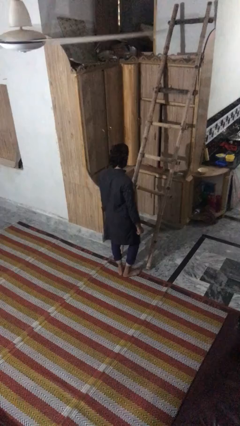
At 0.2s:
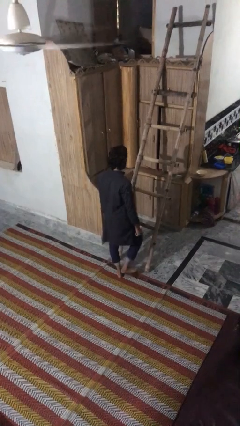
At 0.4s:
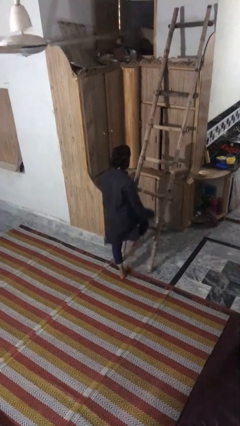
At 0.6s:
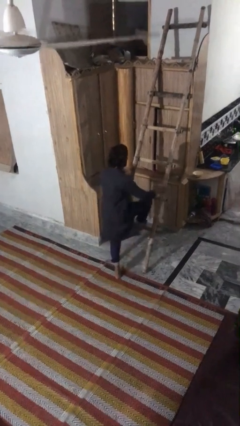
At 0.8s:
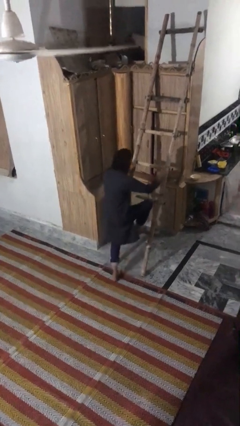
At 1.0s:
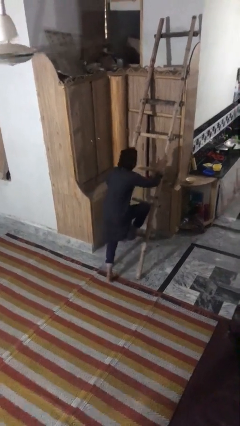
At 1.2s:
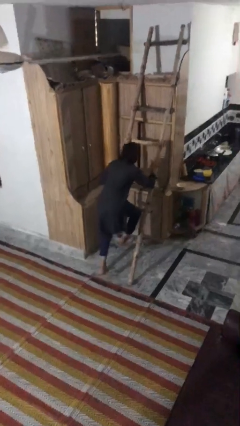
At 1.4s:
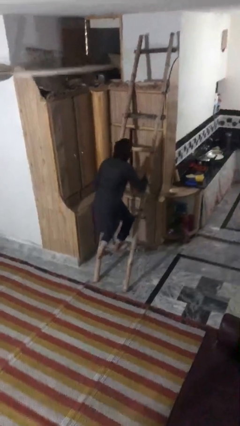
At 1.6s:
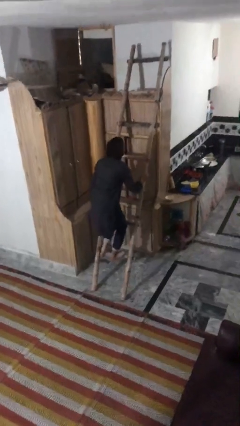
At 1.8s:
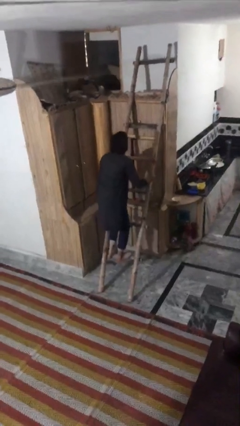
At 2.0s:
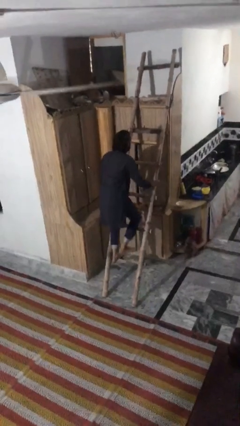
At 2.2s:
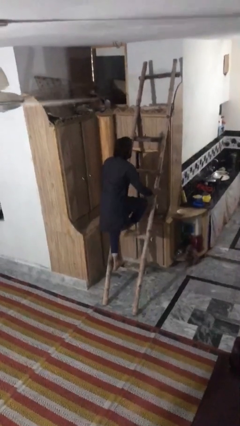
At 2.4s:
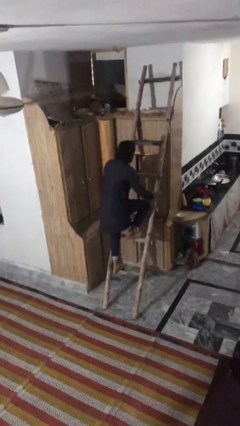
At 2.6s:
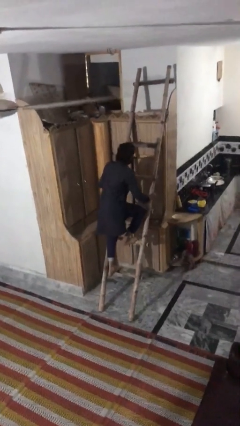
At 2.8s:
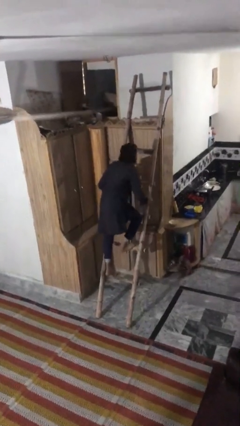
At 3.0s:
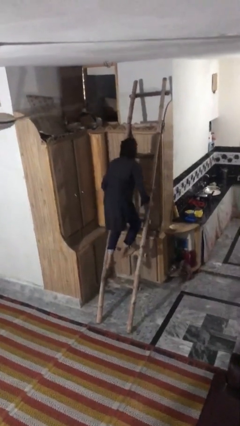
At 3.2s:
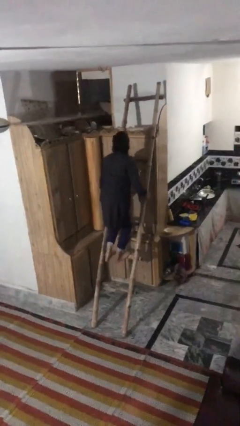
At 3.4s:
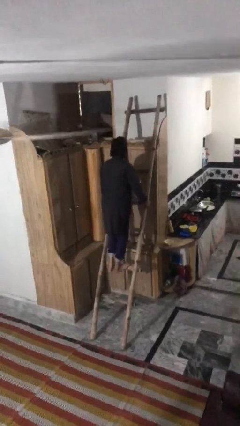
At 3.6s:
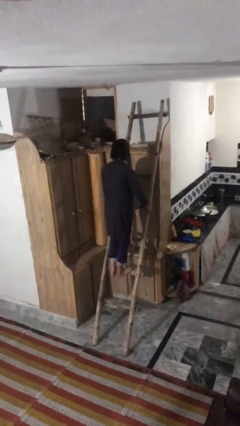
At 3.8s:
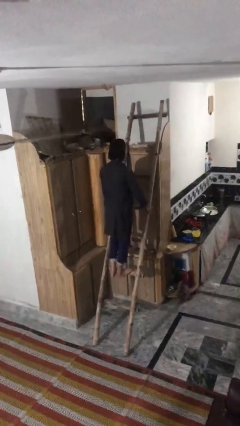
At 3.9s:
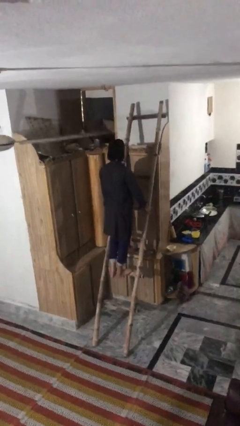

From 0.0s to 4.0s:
person climbs up ladder

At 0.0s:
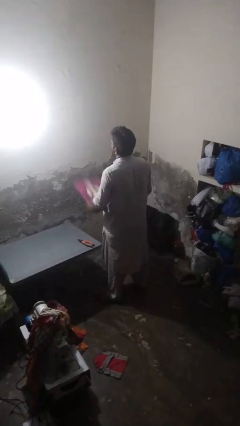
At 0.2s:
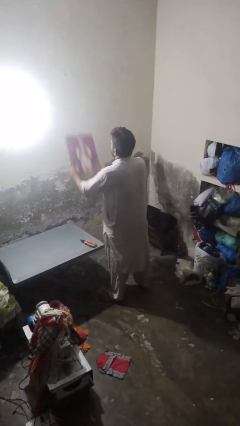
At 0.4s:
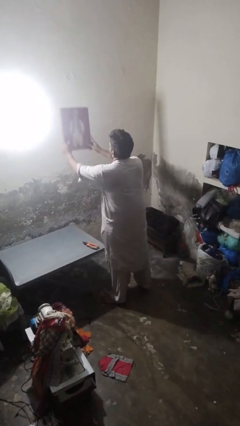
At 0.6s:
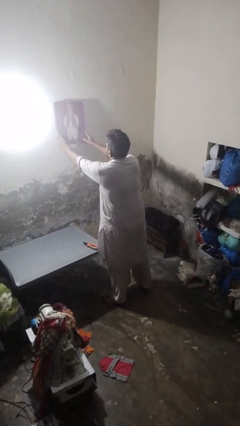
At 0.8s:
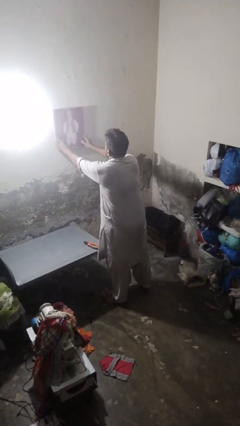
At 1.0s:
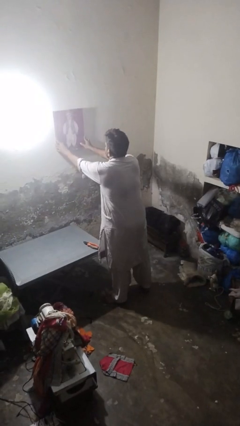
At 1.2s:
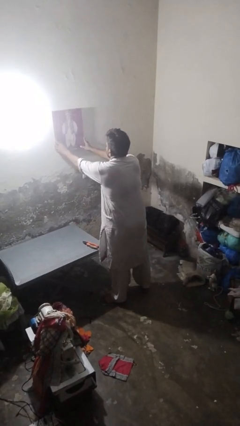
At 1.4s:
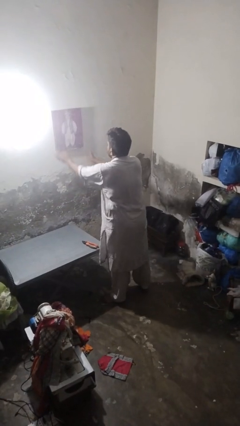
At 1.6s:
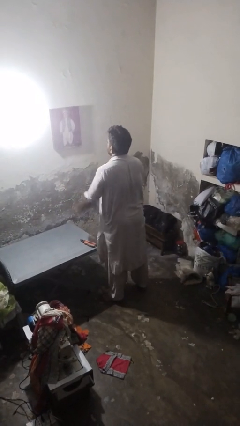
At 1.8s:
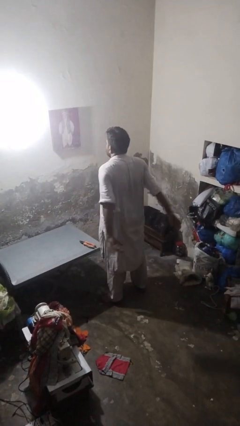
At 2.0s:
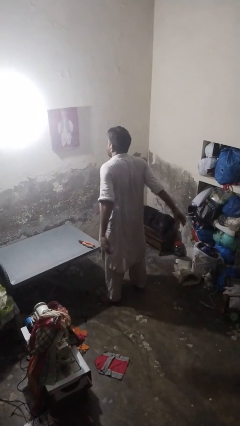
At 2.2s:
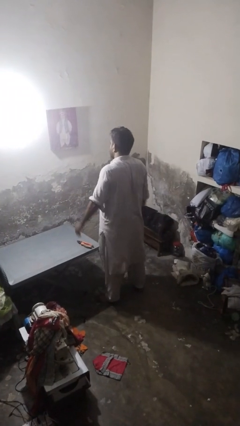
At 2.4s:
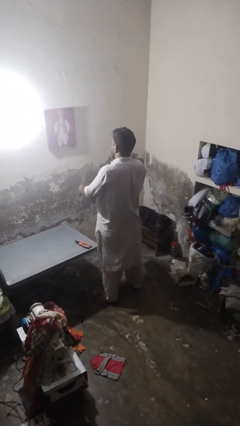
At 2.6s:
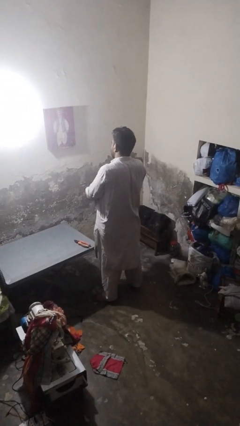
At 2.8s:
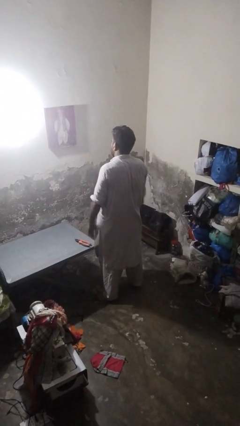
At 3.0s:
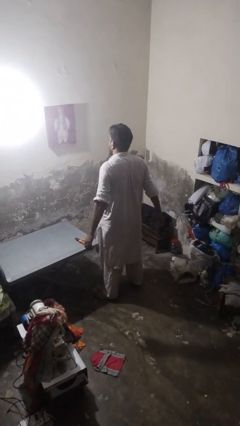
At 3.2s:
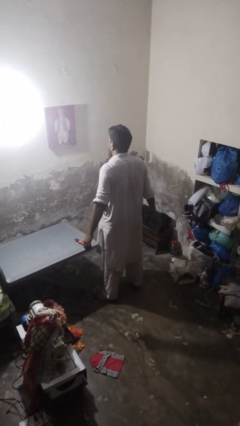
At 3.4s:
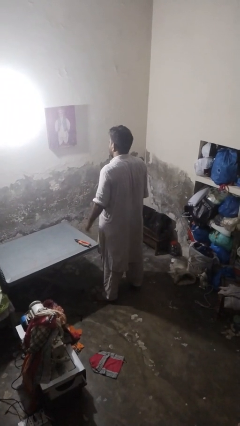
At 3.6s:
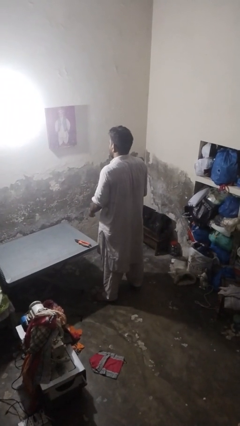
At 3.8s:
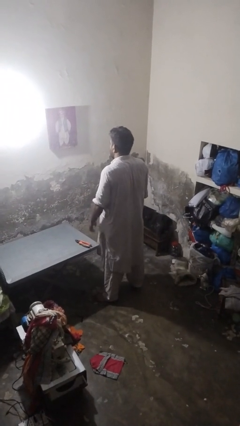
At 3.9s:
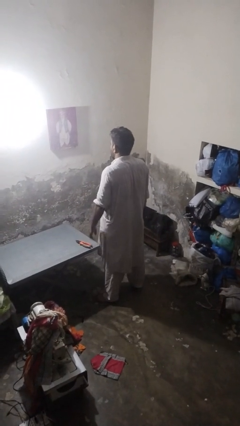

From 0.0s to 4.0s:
person puts up picture frame

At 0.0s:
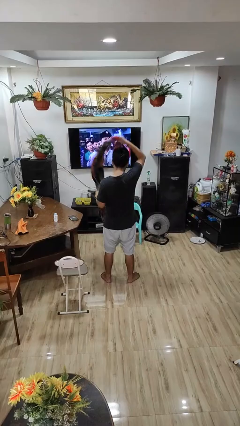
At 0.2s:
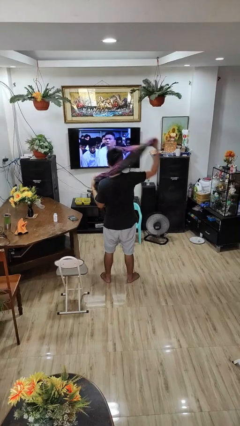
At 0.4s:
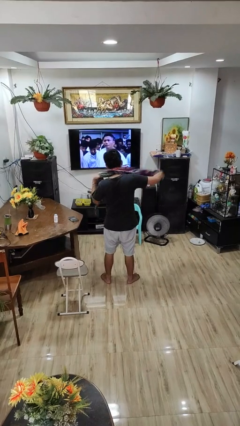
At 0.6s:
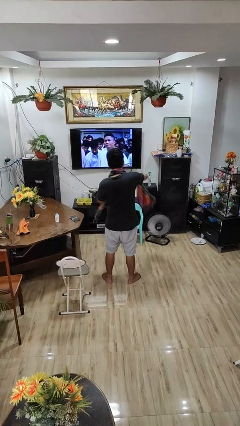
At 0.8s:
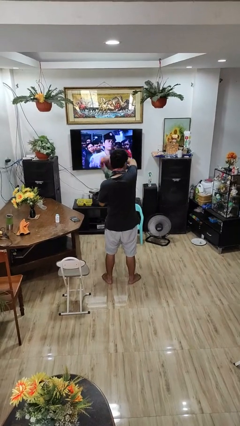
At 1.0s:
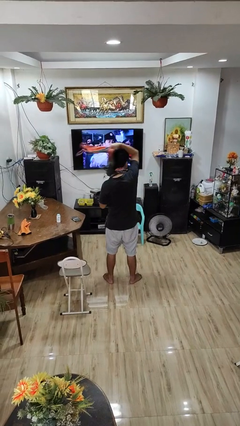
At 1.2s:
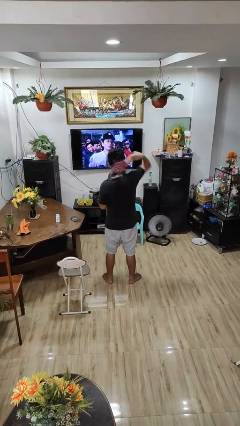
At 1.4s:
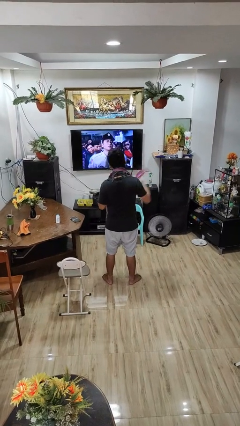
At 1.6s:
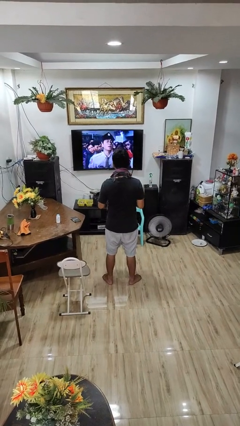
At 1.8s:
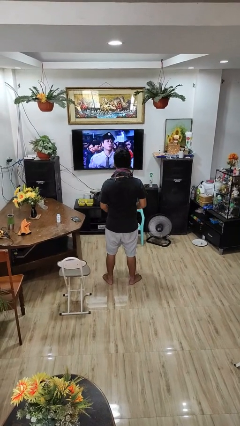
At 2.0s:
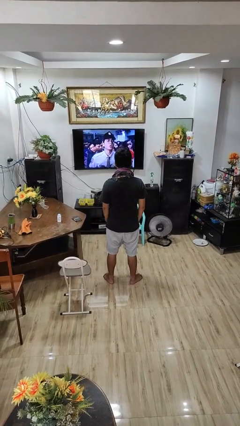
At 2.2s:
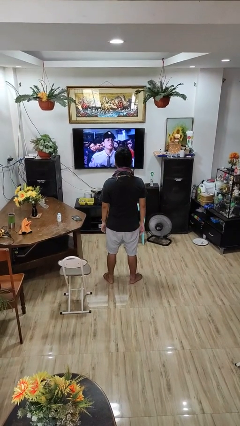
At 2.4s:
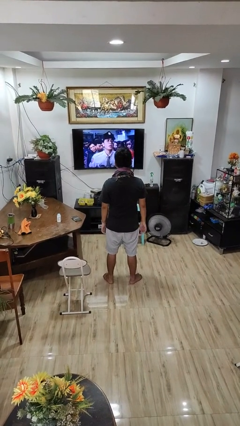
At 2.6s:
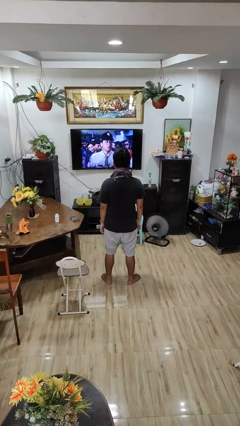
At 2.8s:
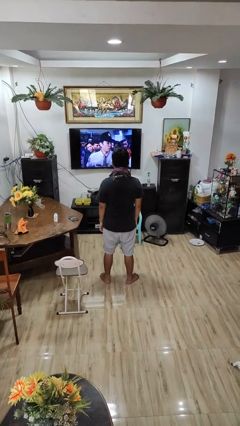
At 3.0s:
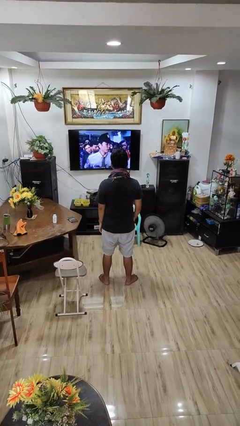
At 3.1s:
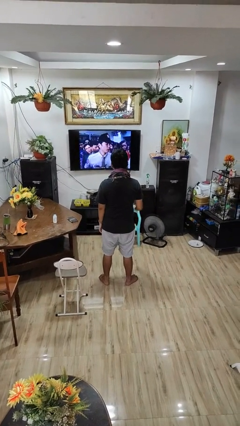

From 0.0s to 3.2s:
person puts on scarf

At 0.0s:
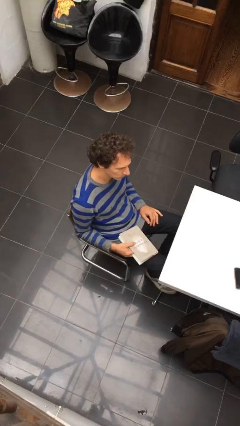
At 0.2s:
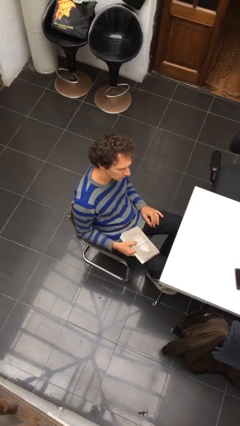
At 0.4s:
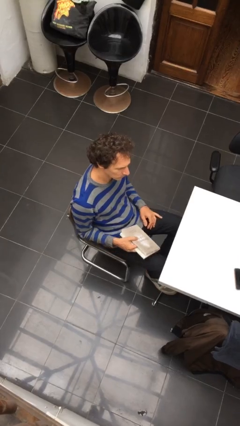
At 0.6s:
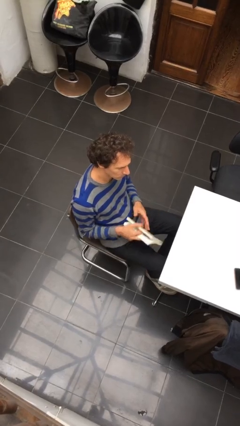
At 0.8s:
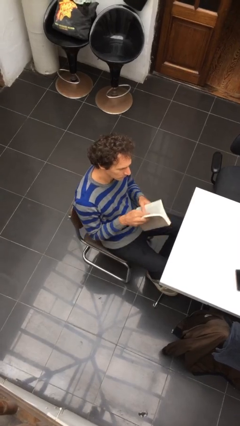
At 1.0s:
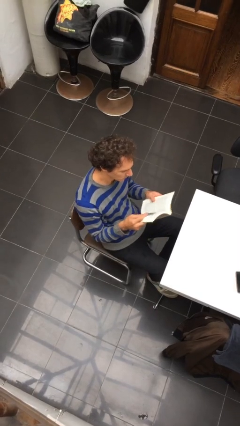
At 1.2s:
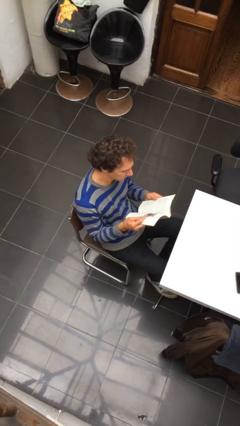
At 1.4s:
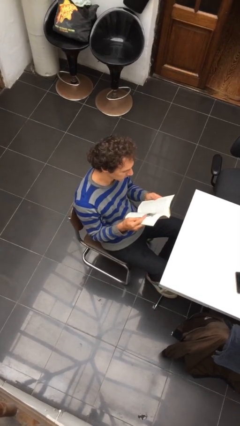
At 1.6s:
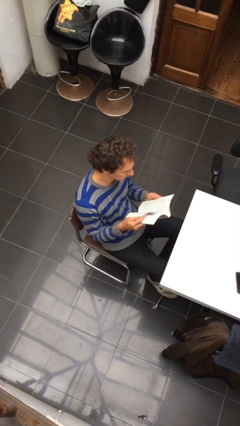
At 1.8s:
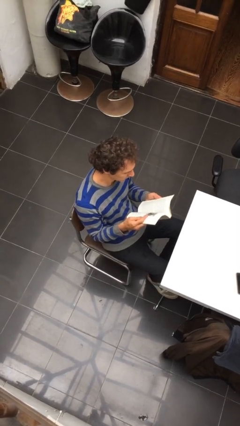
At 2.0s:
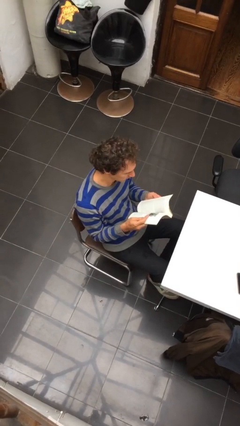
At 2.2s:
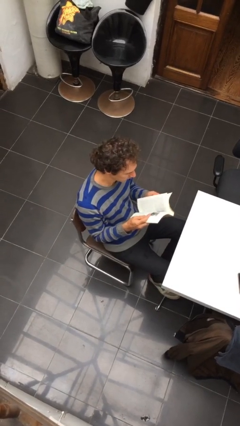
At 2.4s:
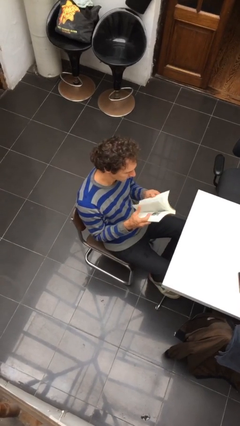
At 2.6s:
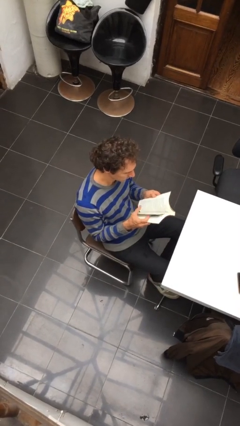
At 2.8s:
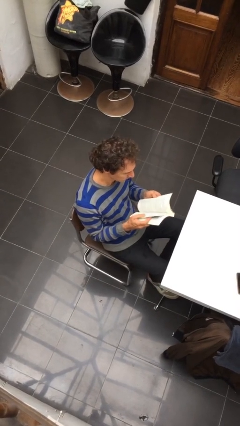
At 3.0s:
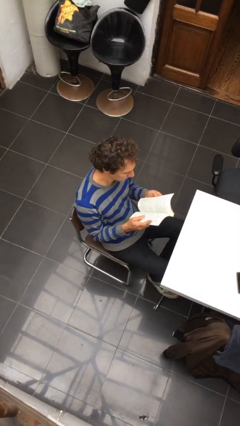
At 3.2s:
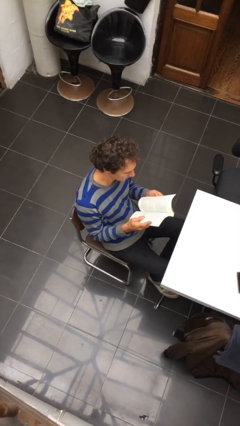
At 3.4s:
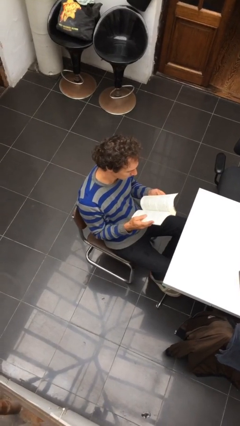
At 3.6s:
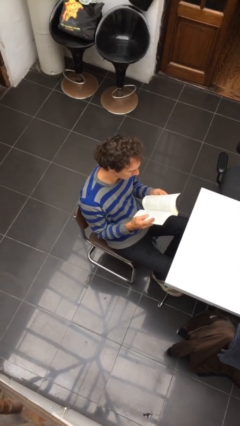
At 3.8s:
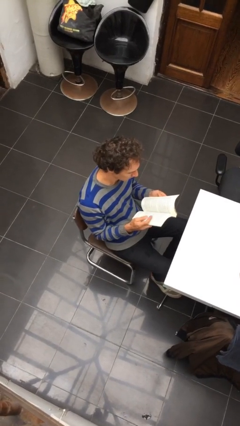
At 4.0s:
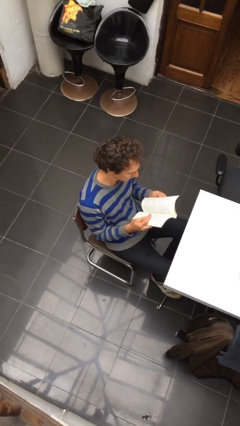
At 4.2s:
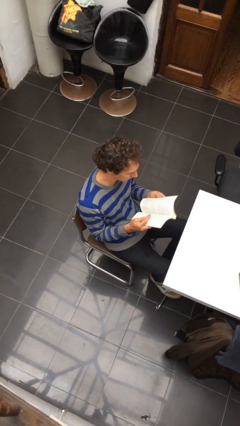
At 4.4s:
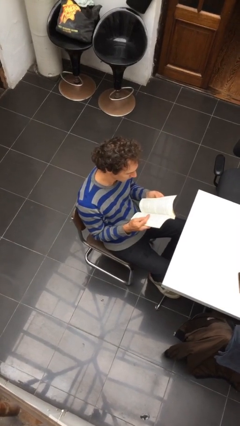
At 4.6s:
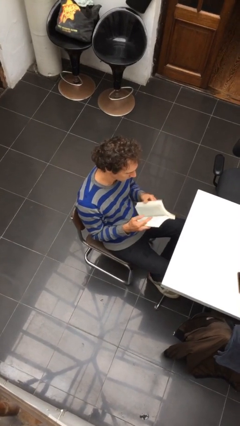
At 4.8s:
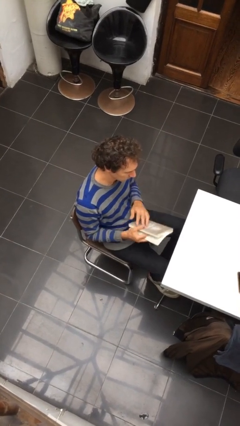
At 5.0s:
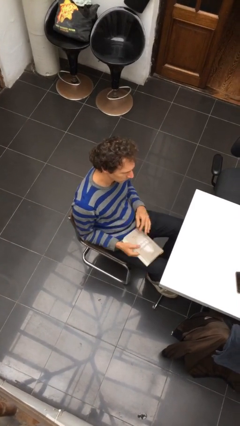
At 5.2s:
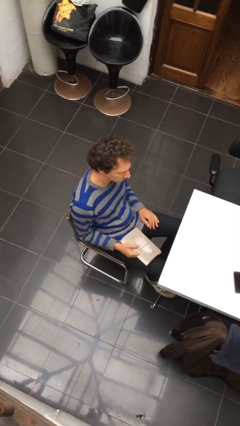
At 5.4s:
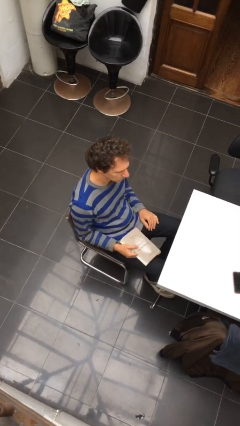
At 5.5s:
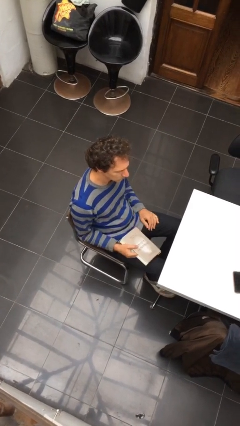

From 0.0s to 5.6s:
person reads document

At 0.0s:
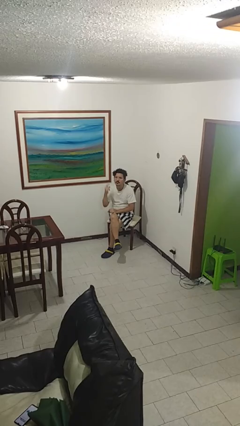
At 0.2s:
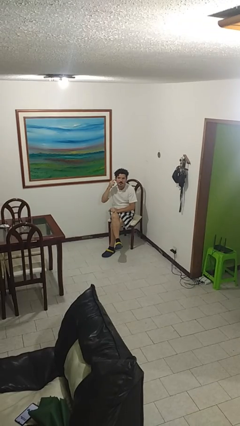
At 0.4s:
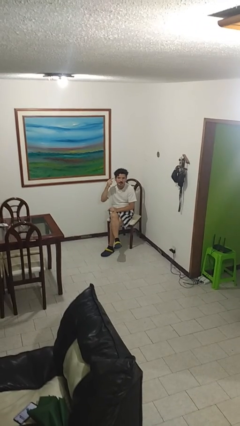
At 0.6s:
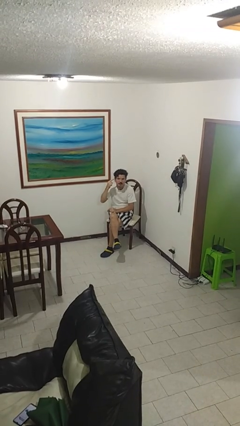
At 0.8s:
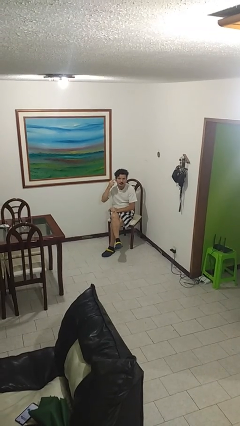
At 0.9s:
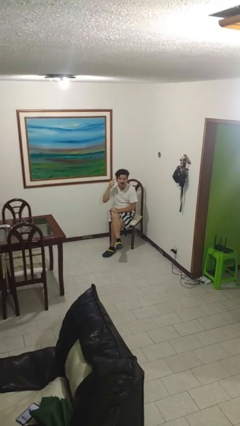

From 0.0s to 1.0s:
person gestures listen closely
